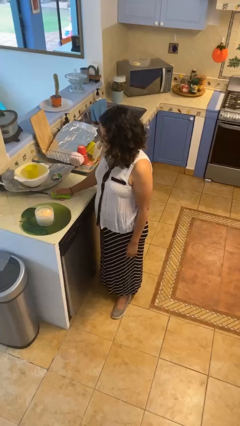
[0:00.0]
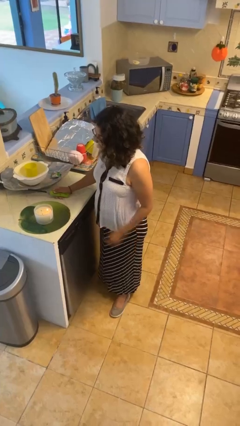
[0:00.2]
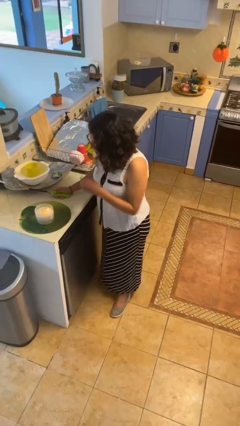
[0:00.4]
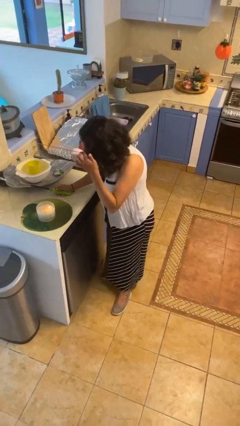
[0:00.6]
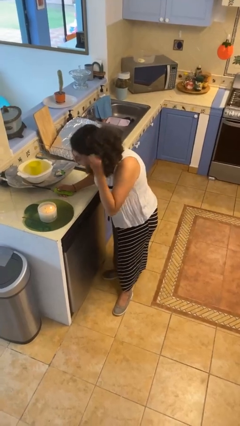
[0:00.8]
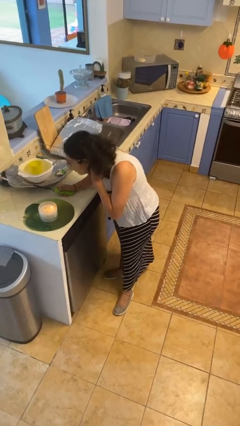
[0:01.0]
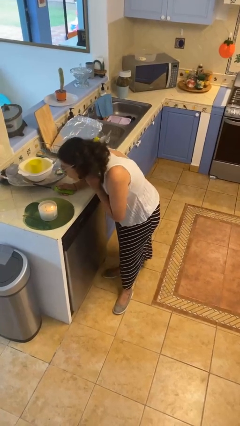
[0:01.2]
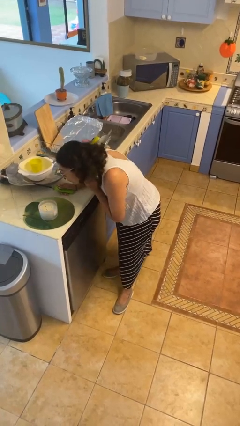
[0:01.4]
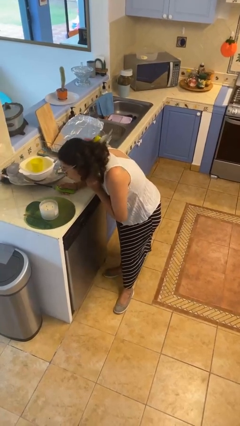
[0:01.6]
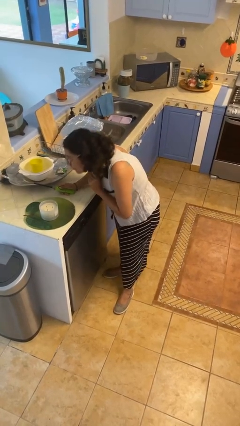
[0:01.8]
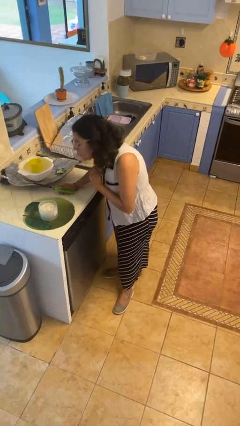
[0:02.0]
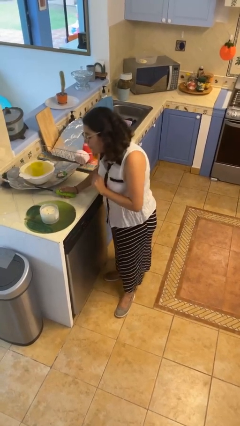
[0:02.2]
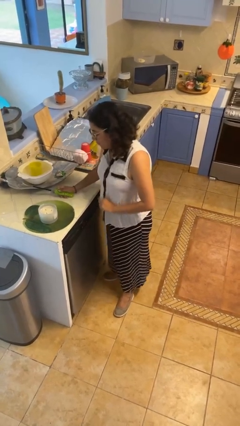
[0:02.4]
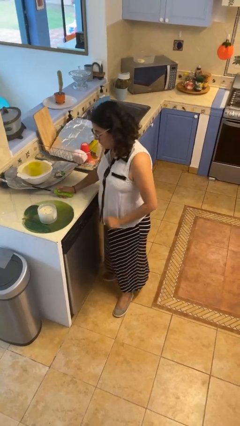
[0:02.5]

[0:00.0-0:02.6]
person extinguishes candle

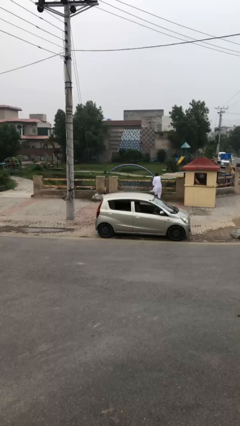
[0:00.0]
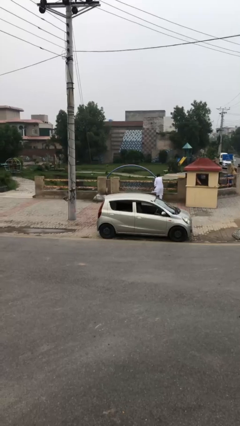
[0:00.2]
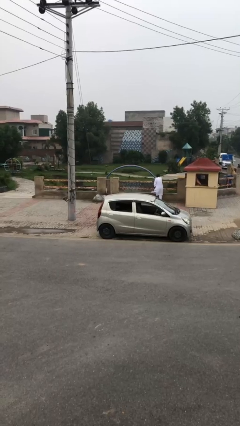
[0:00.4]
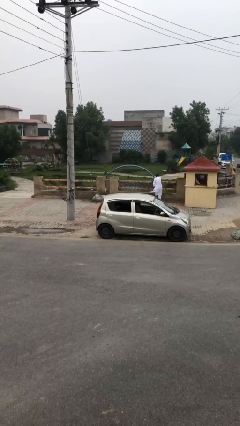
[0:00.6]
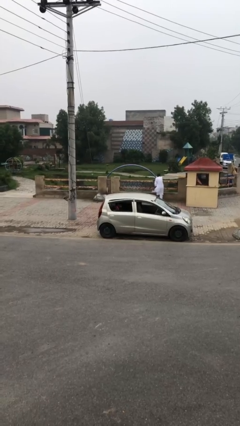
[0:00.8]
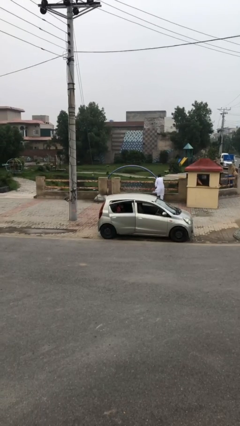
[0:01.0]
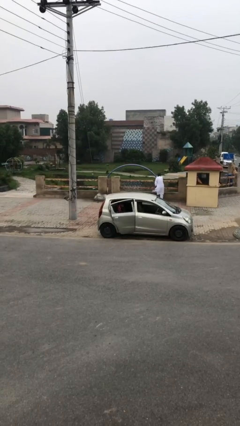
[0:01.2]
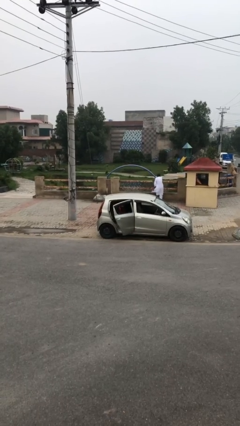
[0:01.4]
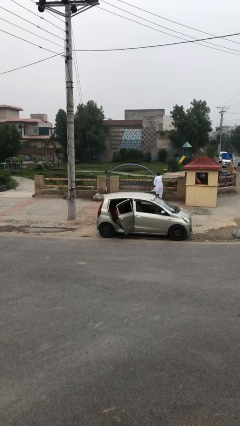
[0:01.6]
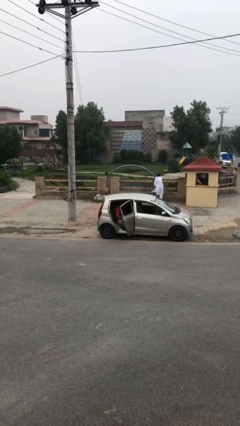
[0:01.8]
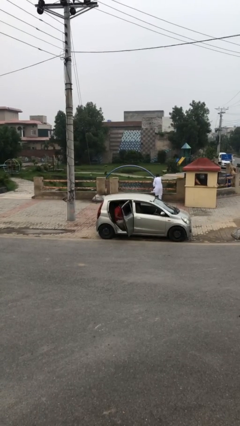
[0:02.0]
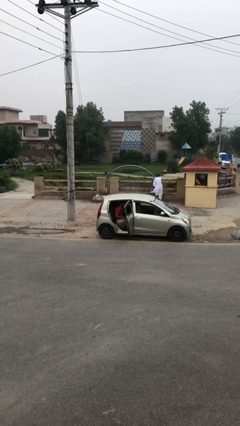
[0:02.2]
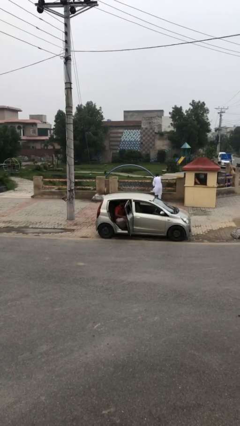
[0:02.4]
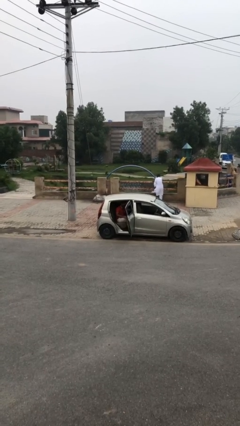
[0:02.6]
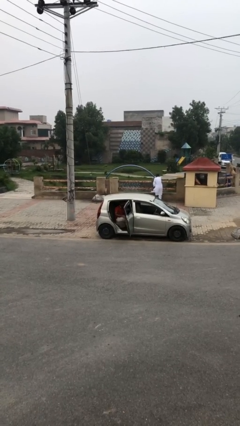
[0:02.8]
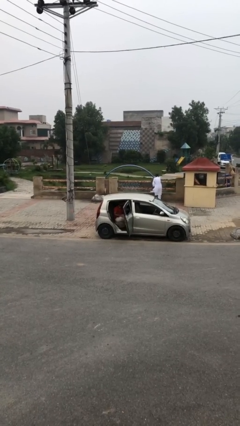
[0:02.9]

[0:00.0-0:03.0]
person opens car door

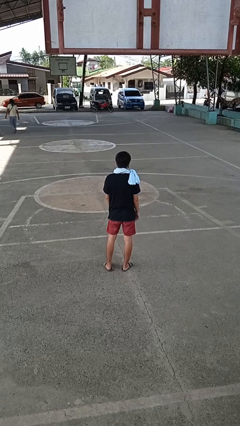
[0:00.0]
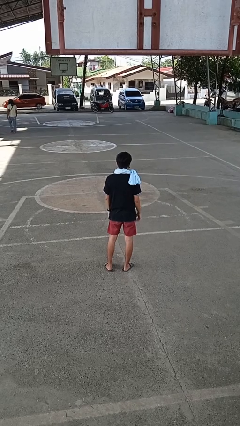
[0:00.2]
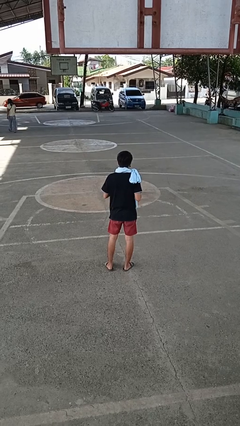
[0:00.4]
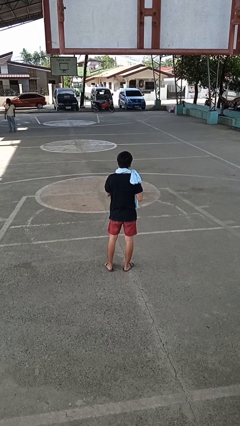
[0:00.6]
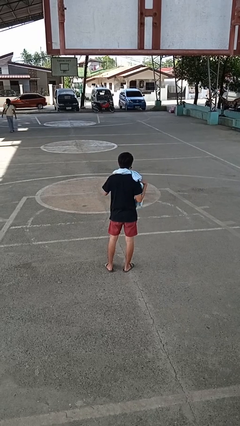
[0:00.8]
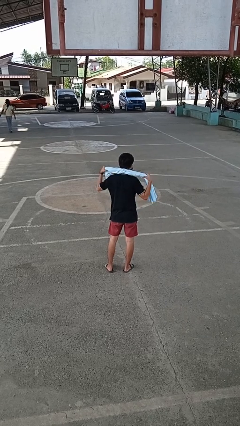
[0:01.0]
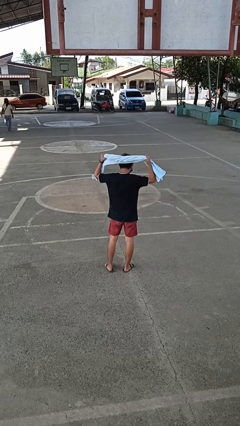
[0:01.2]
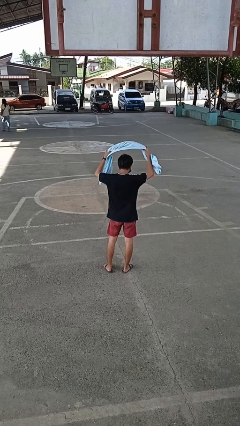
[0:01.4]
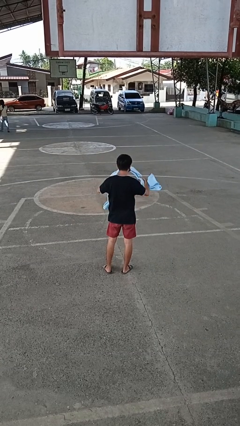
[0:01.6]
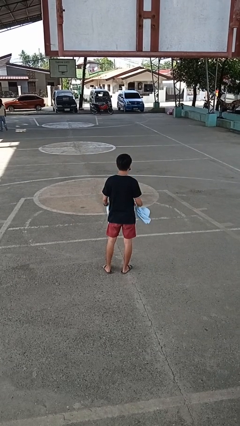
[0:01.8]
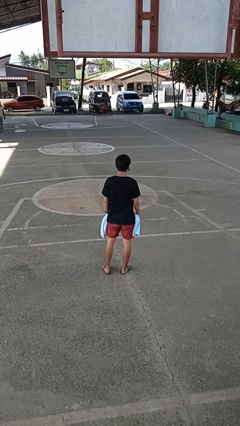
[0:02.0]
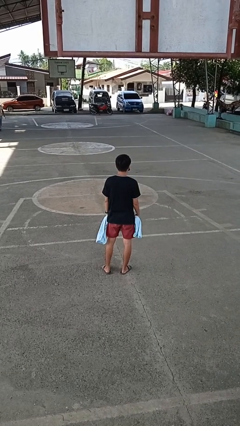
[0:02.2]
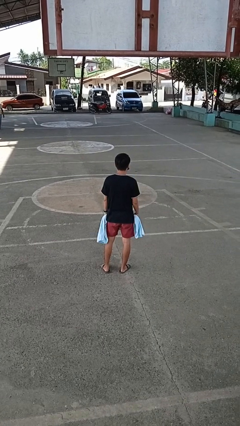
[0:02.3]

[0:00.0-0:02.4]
person takes off scarf

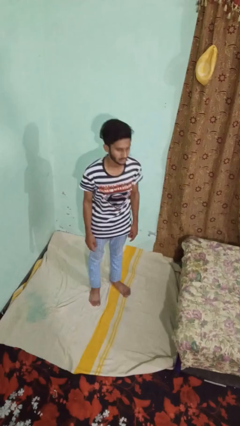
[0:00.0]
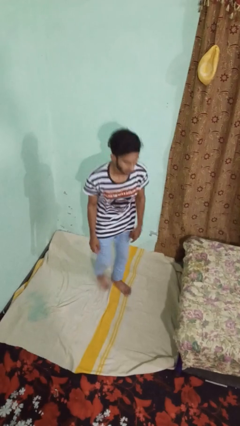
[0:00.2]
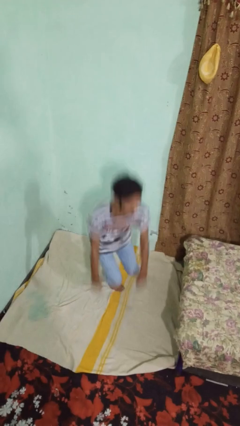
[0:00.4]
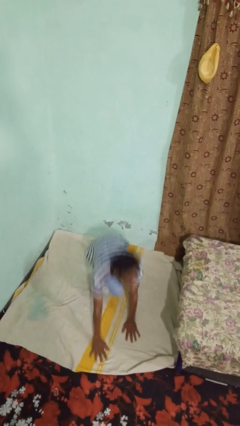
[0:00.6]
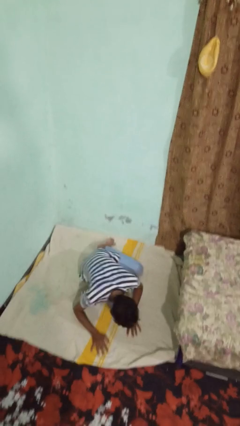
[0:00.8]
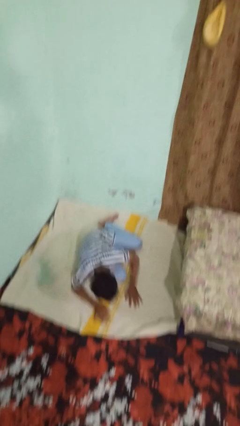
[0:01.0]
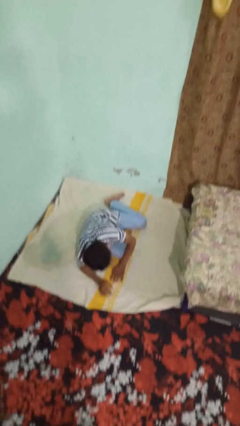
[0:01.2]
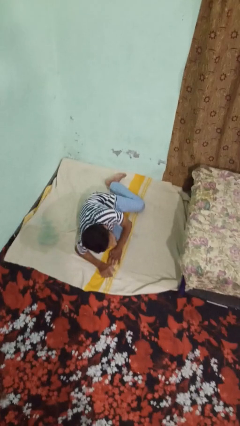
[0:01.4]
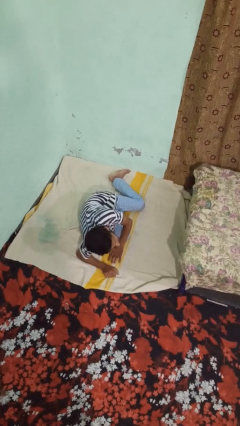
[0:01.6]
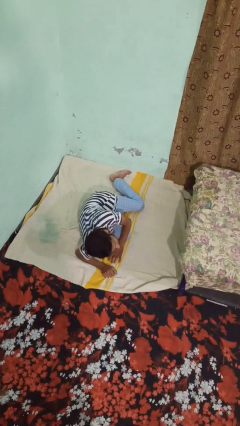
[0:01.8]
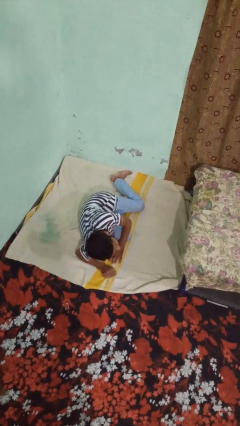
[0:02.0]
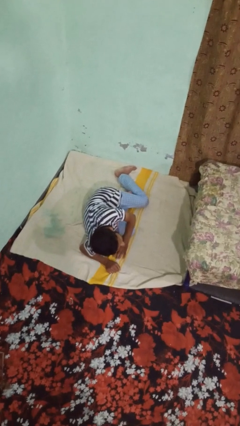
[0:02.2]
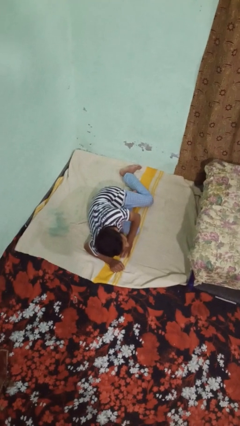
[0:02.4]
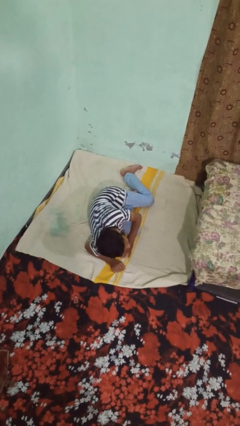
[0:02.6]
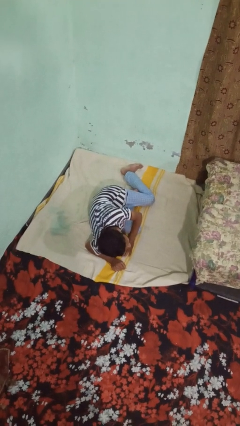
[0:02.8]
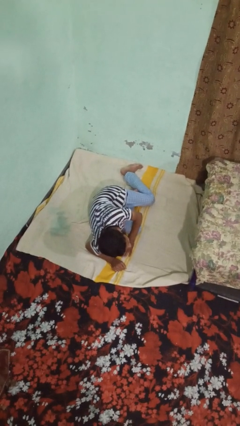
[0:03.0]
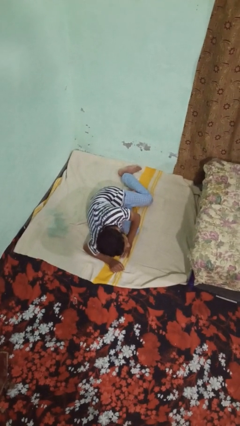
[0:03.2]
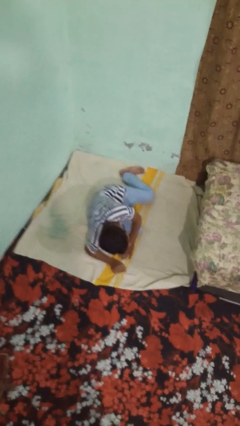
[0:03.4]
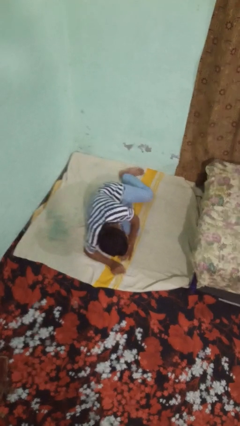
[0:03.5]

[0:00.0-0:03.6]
person falls while standing

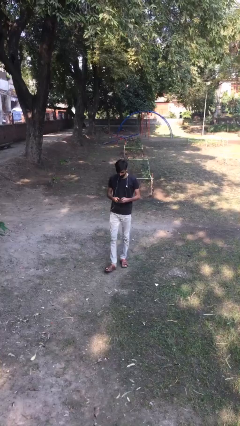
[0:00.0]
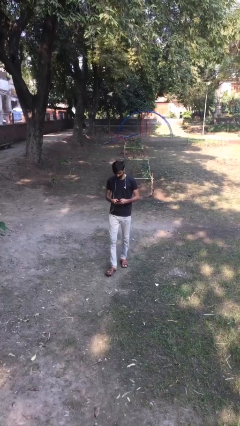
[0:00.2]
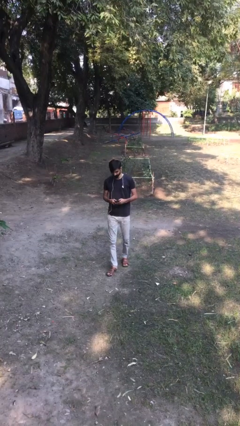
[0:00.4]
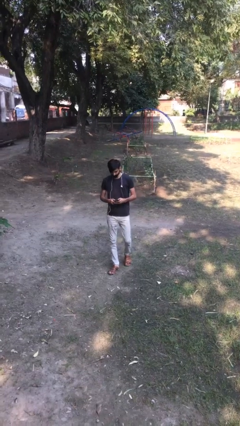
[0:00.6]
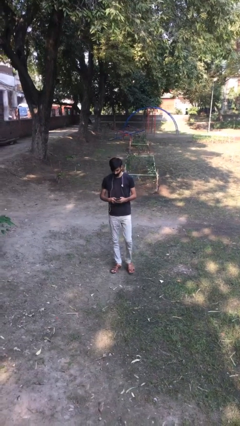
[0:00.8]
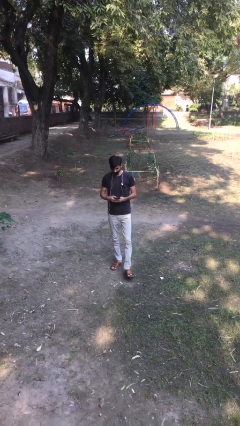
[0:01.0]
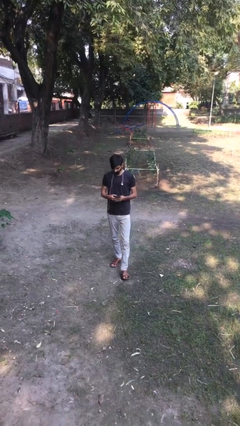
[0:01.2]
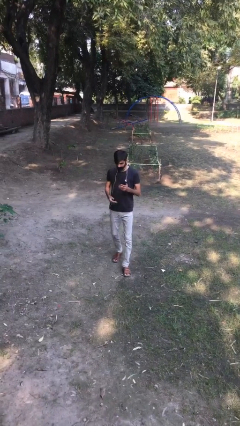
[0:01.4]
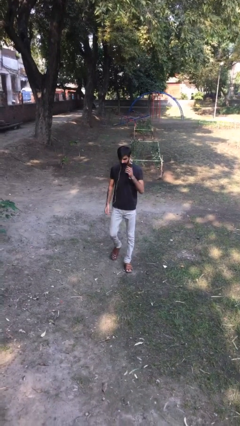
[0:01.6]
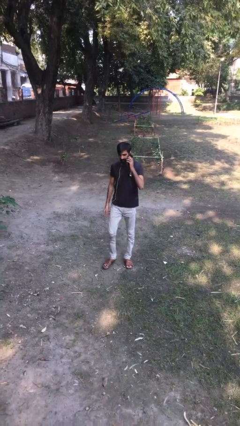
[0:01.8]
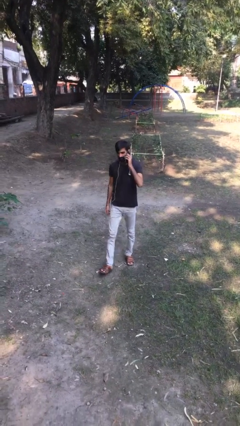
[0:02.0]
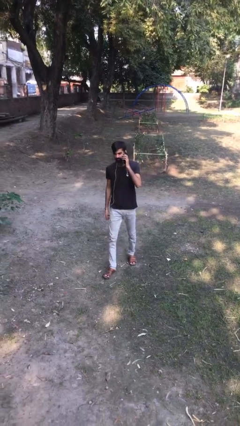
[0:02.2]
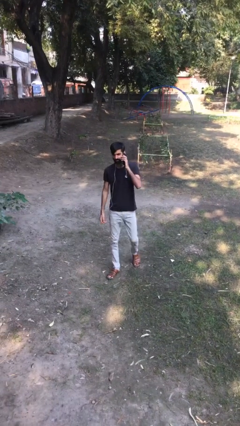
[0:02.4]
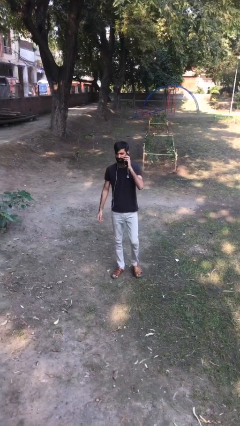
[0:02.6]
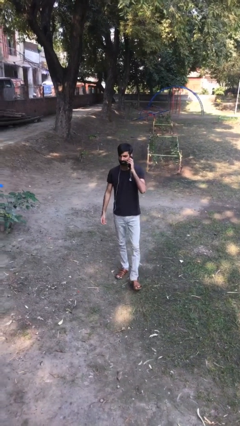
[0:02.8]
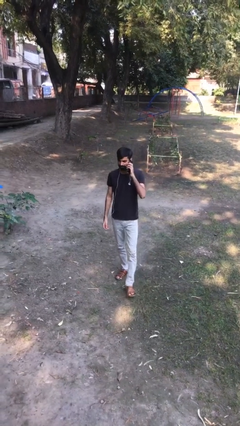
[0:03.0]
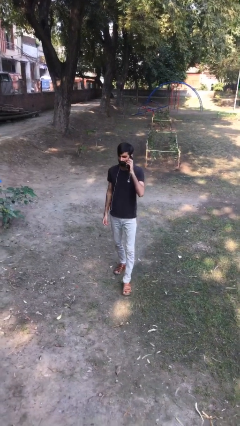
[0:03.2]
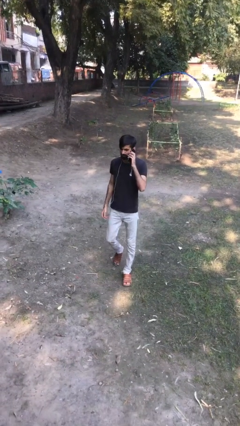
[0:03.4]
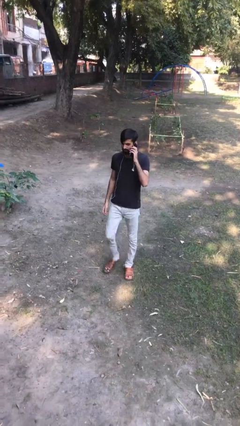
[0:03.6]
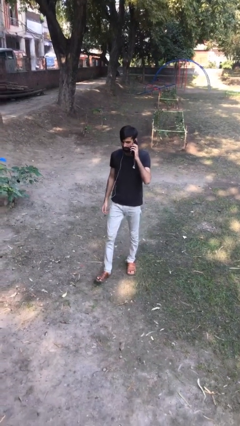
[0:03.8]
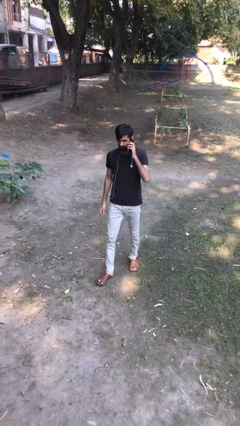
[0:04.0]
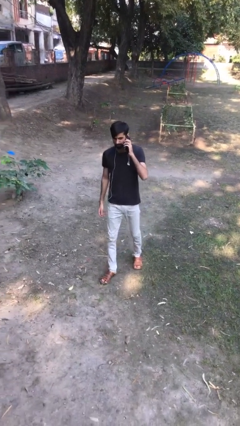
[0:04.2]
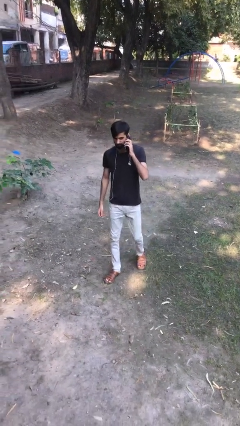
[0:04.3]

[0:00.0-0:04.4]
person talks on phone

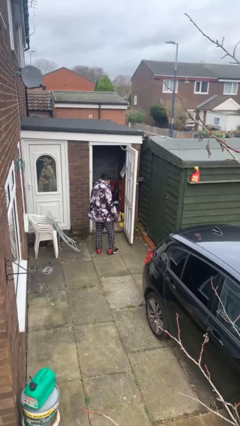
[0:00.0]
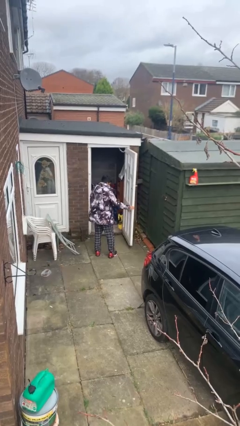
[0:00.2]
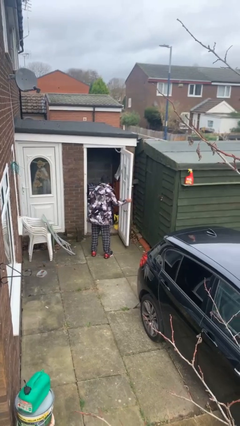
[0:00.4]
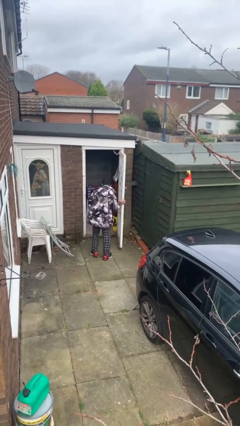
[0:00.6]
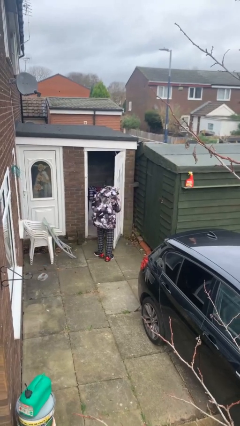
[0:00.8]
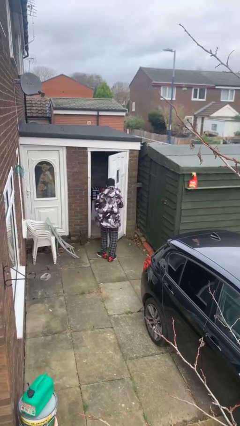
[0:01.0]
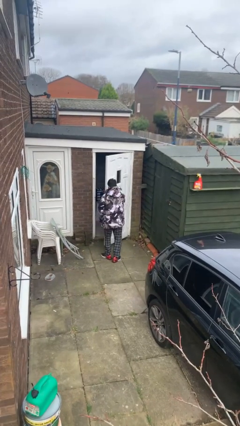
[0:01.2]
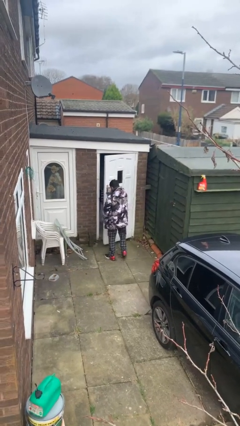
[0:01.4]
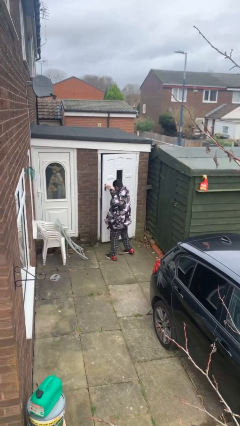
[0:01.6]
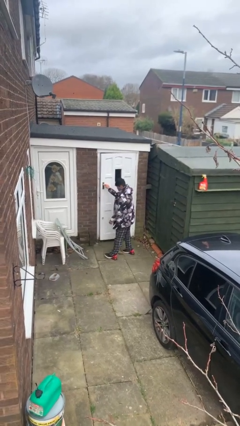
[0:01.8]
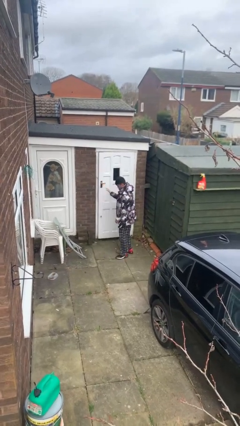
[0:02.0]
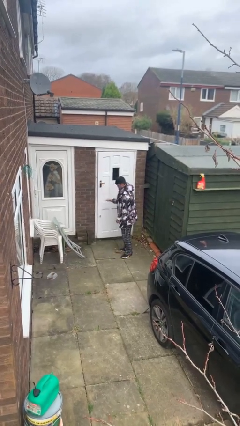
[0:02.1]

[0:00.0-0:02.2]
person closes facility door
